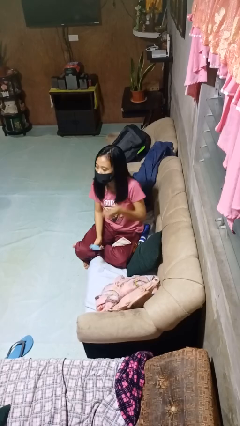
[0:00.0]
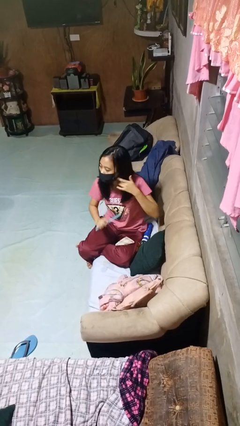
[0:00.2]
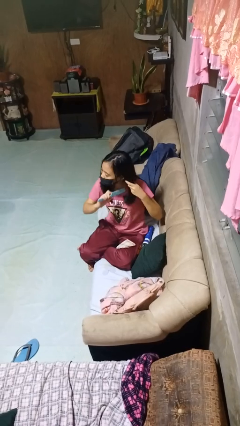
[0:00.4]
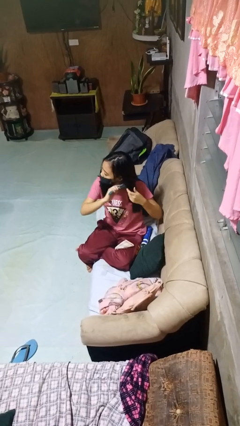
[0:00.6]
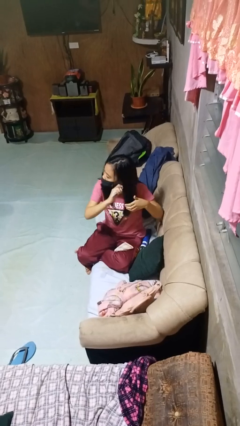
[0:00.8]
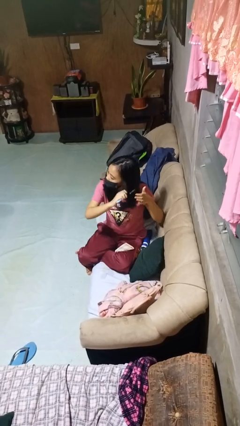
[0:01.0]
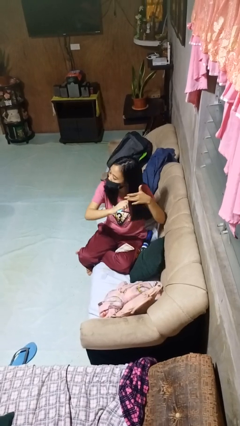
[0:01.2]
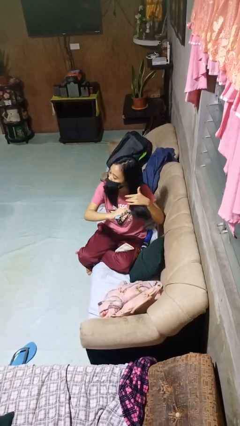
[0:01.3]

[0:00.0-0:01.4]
person brushes hair

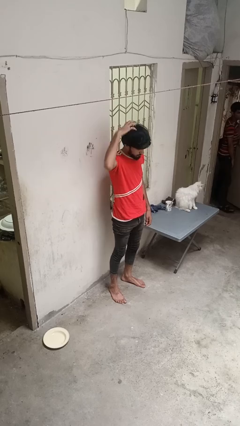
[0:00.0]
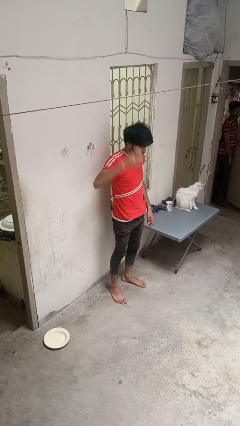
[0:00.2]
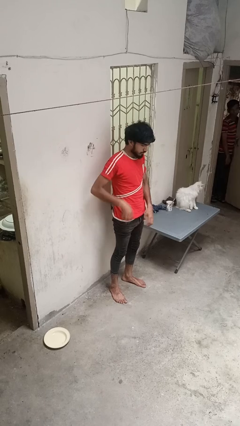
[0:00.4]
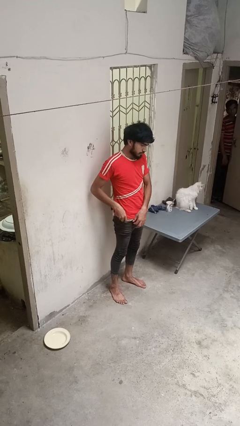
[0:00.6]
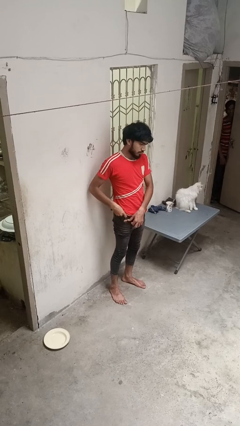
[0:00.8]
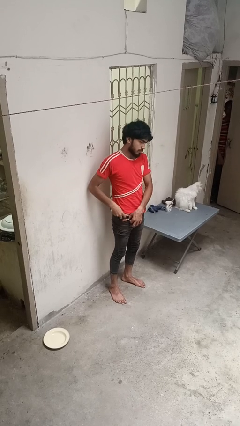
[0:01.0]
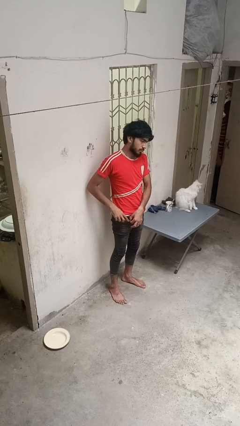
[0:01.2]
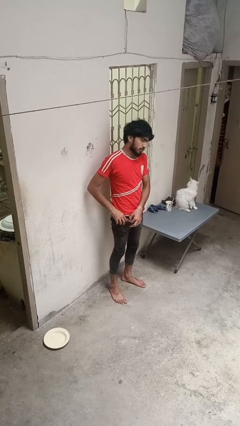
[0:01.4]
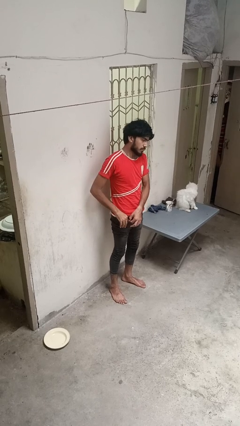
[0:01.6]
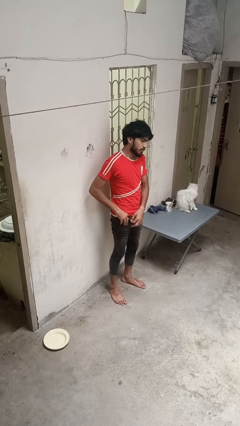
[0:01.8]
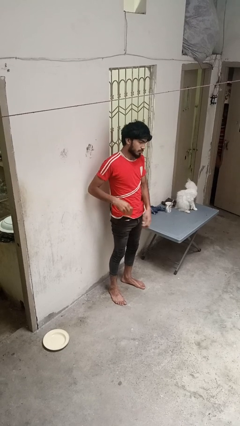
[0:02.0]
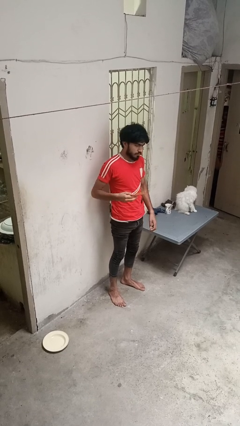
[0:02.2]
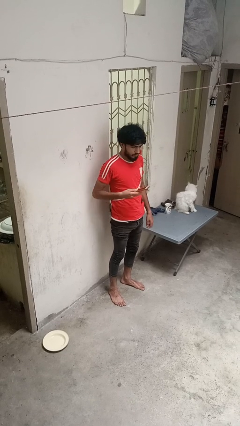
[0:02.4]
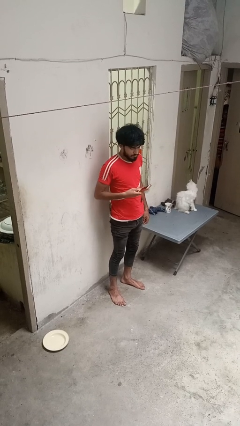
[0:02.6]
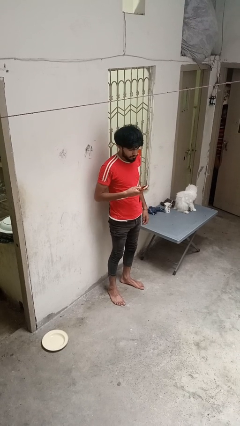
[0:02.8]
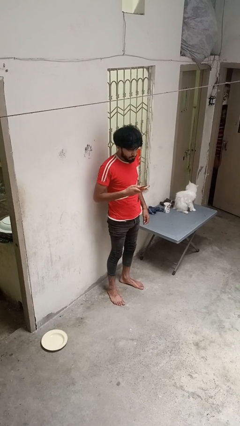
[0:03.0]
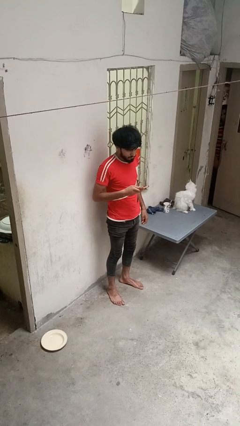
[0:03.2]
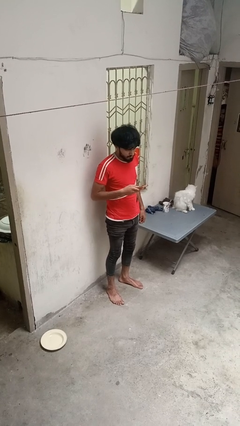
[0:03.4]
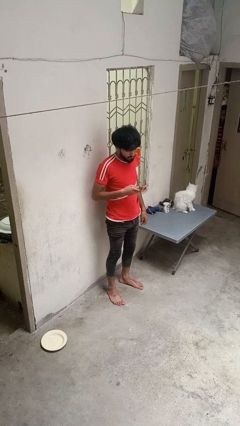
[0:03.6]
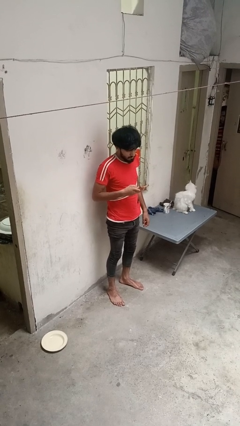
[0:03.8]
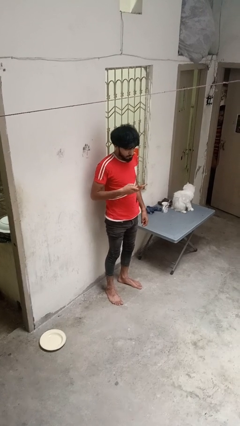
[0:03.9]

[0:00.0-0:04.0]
person takes phone from pocket

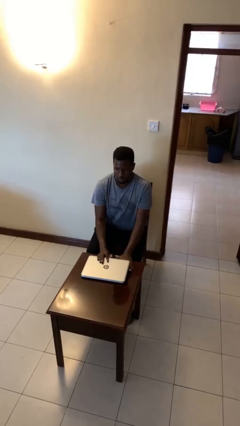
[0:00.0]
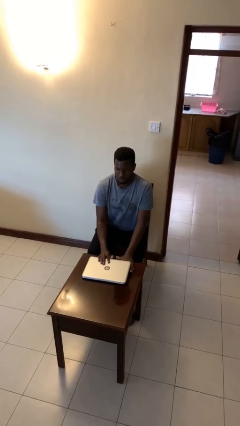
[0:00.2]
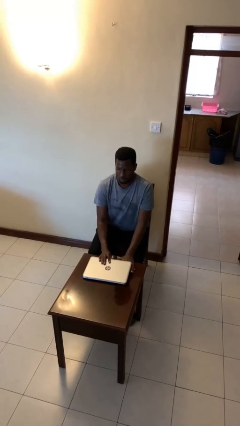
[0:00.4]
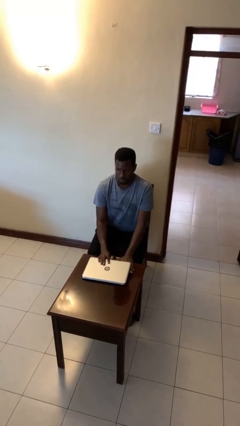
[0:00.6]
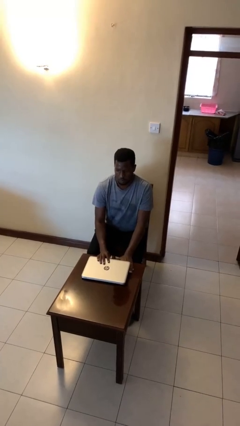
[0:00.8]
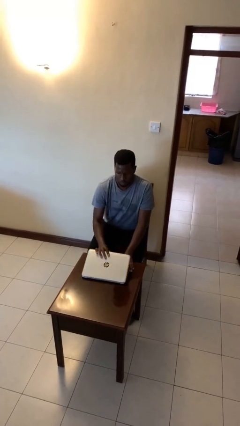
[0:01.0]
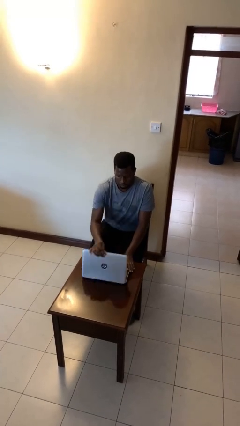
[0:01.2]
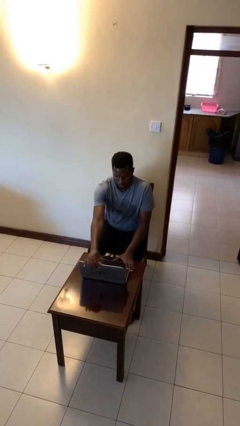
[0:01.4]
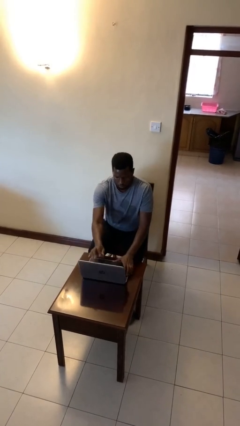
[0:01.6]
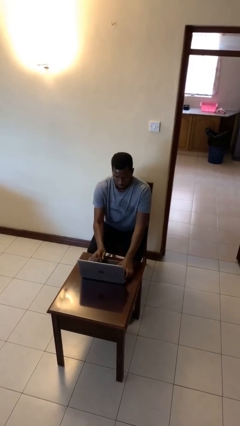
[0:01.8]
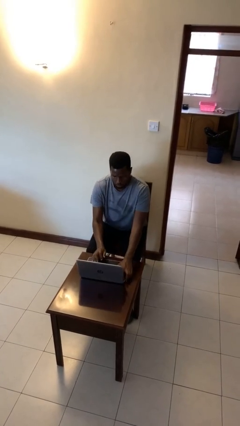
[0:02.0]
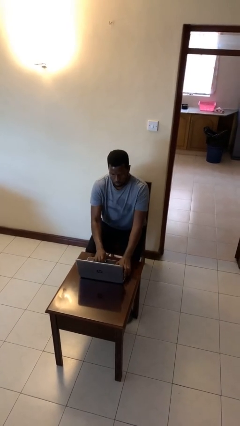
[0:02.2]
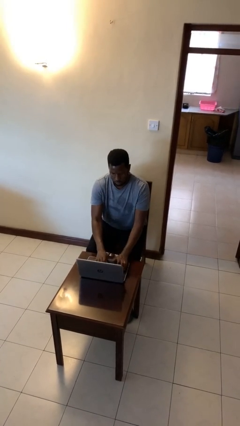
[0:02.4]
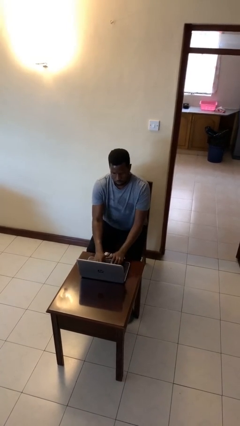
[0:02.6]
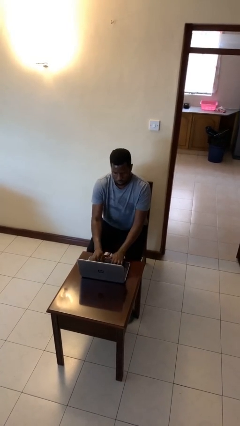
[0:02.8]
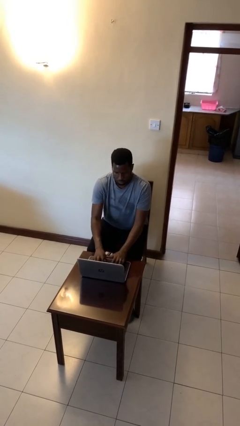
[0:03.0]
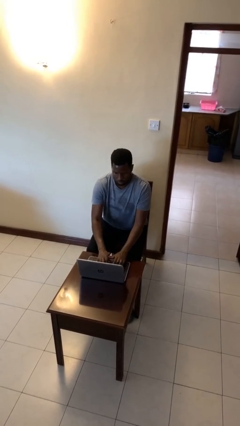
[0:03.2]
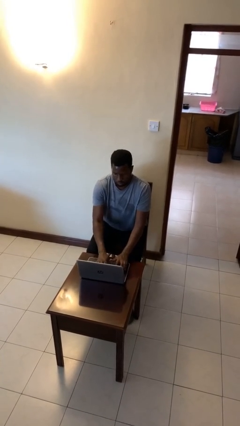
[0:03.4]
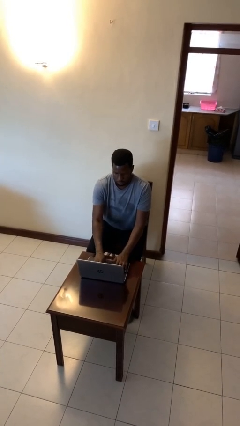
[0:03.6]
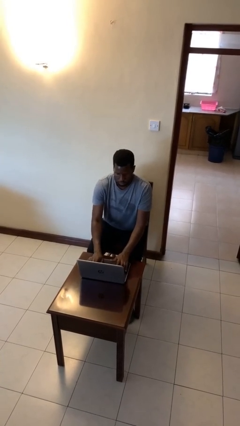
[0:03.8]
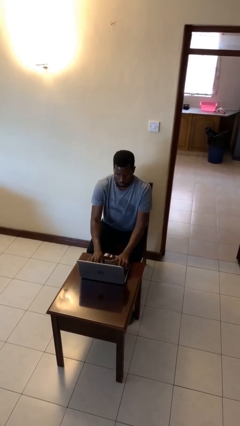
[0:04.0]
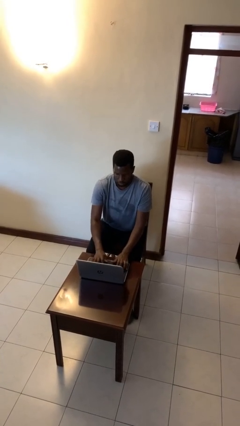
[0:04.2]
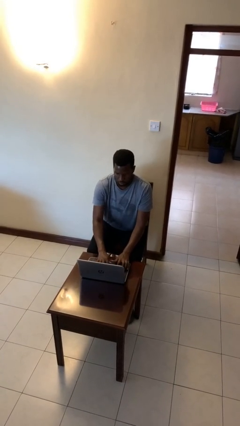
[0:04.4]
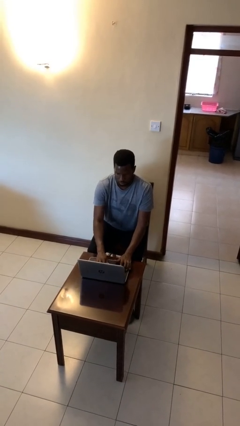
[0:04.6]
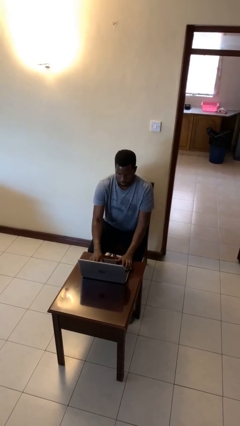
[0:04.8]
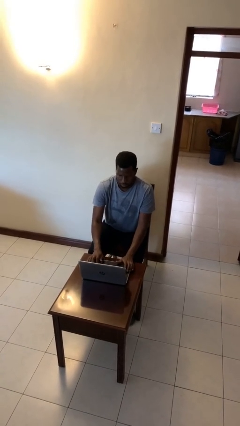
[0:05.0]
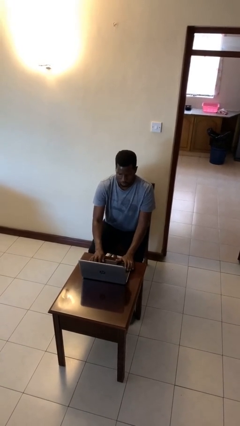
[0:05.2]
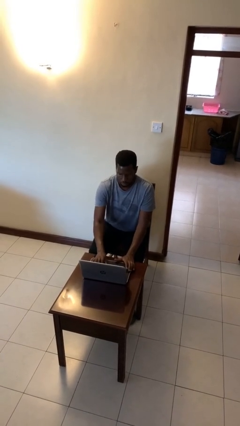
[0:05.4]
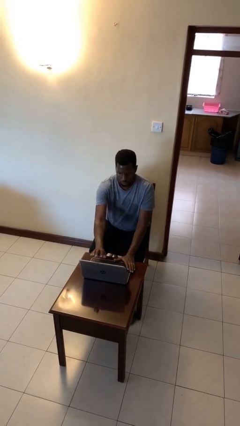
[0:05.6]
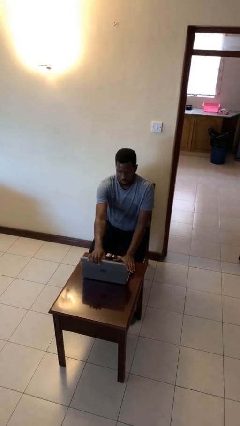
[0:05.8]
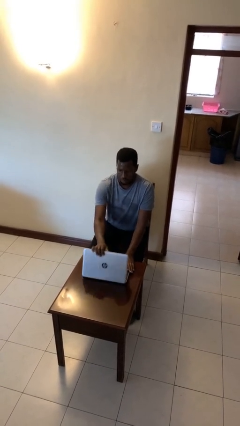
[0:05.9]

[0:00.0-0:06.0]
person interacts with laptop

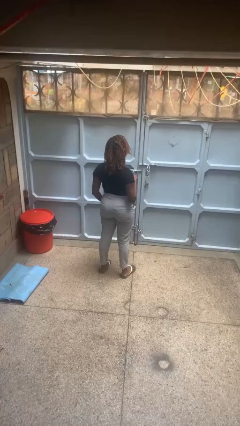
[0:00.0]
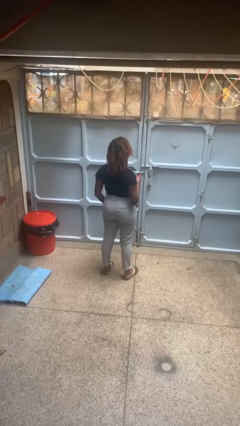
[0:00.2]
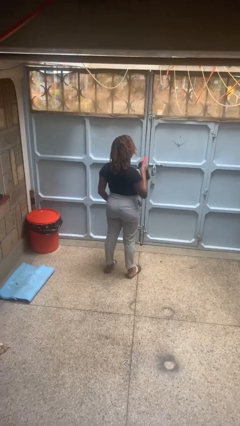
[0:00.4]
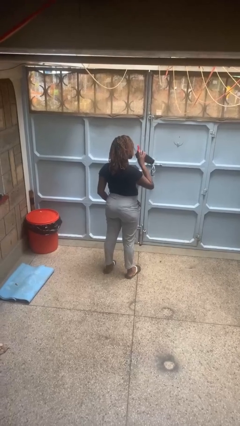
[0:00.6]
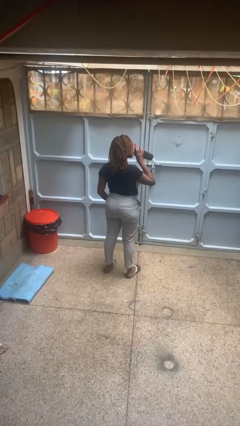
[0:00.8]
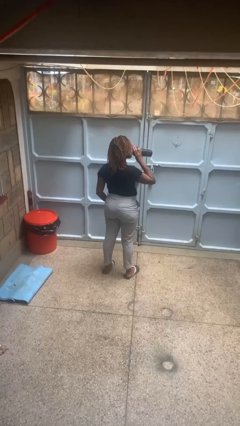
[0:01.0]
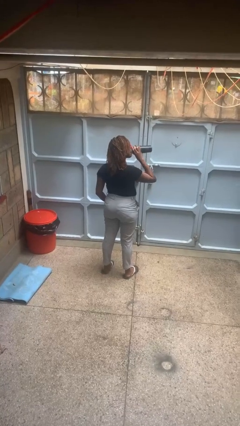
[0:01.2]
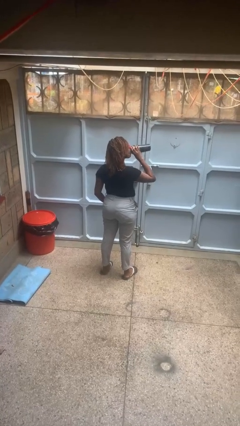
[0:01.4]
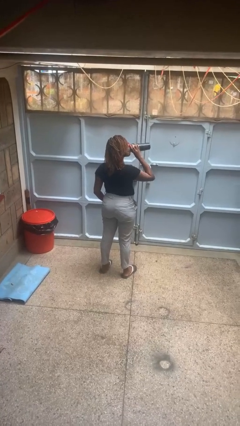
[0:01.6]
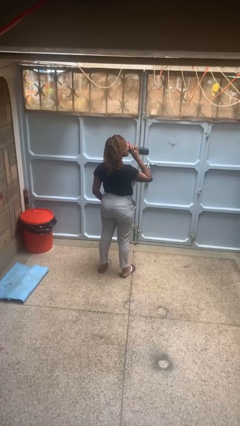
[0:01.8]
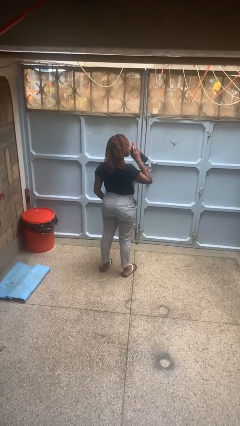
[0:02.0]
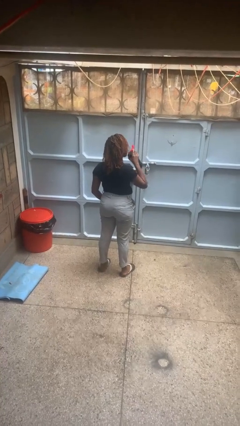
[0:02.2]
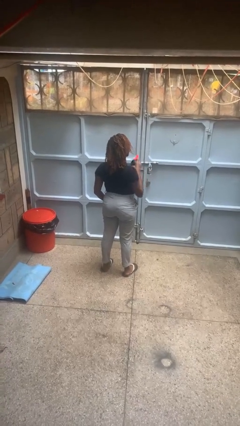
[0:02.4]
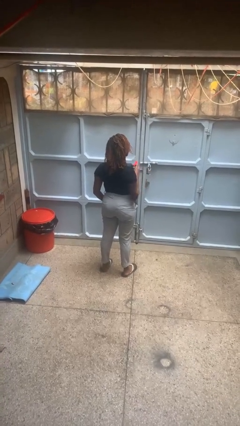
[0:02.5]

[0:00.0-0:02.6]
person drinks from bottle

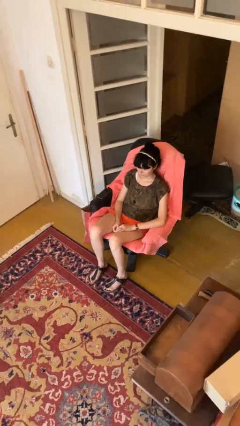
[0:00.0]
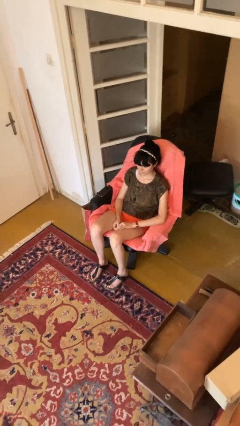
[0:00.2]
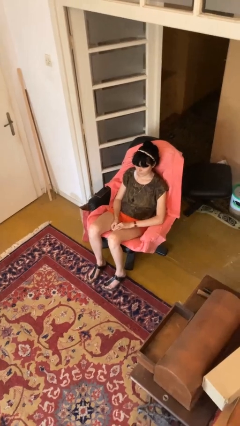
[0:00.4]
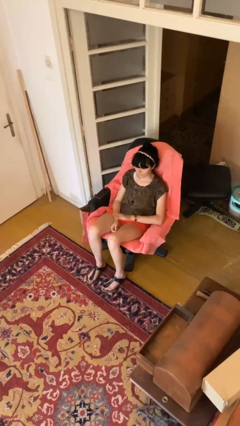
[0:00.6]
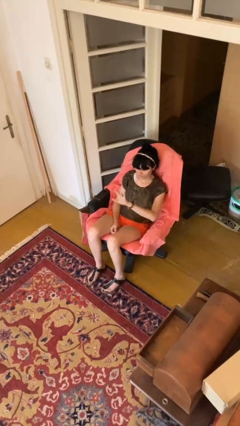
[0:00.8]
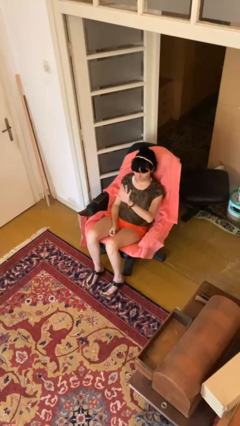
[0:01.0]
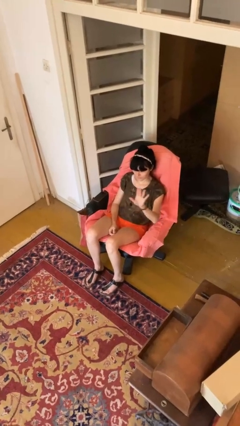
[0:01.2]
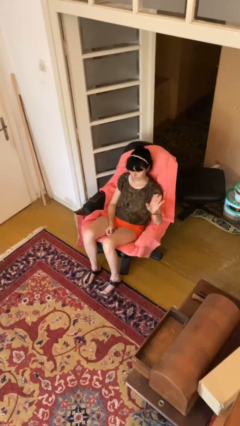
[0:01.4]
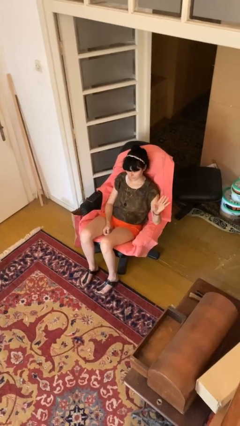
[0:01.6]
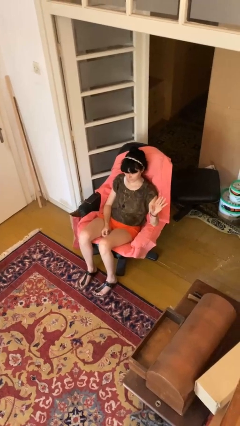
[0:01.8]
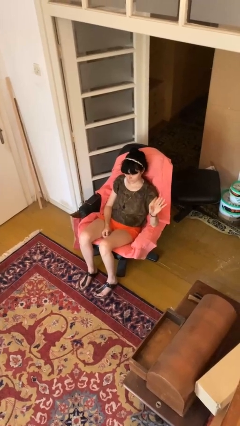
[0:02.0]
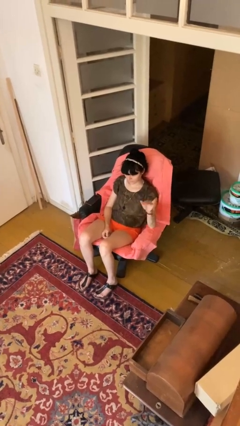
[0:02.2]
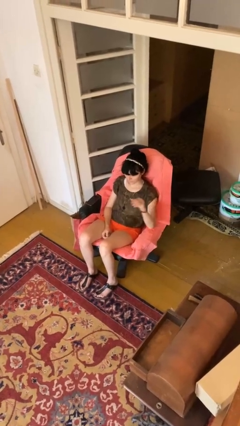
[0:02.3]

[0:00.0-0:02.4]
person gestures swipe left

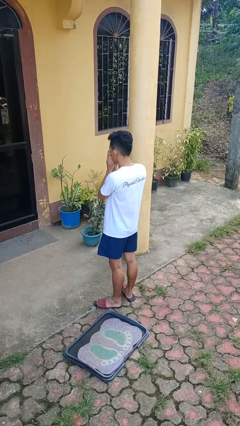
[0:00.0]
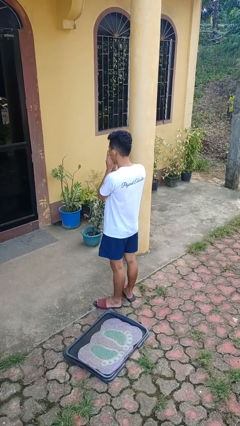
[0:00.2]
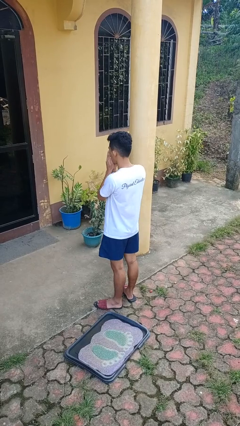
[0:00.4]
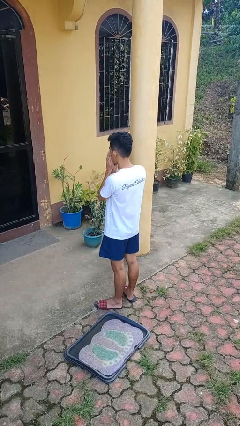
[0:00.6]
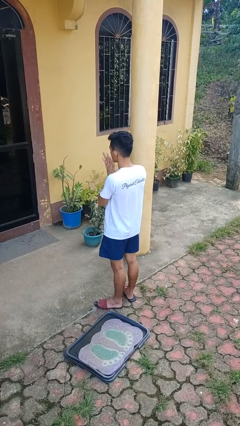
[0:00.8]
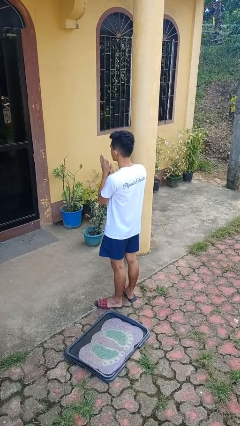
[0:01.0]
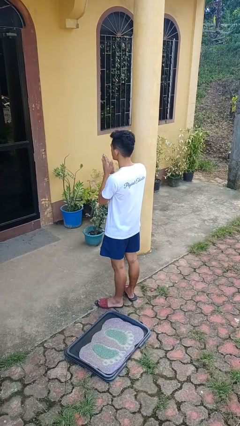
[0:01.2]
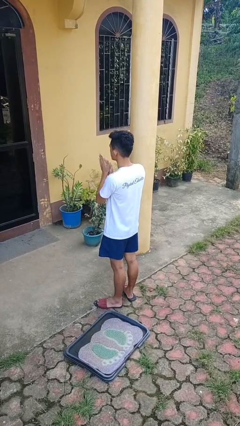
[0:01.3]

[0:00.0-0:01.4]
person blows into hands
